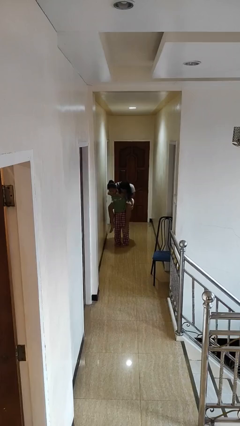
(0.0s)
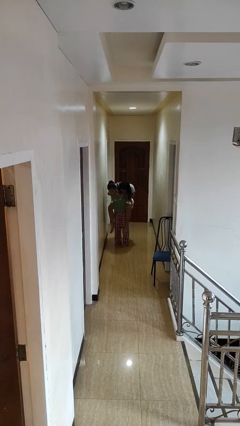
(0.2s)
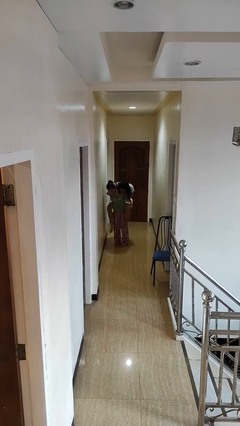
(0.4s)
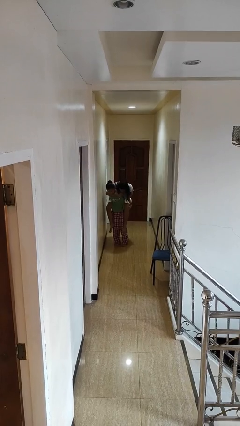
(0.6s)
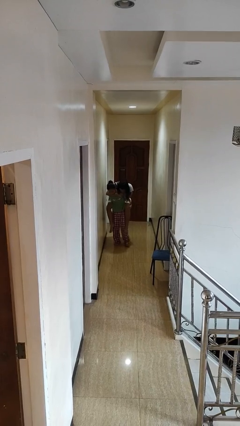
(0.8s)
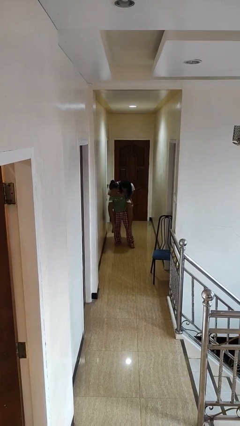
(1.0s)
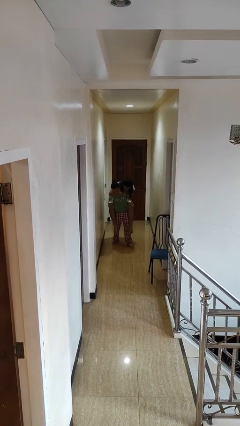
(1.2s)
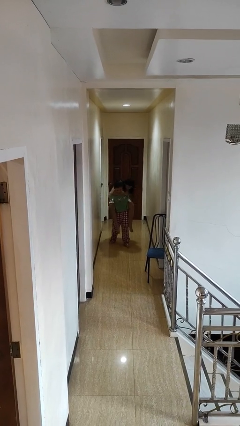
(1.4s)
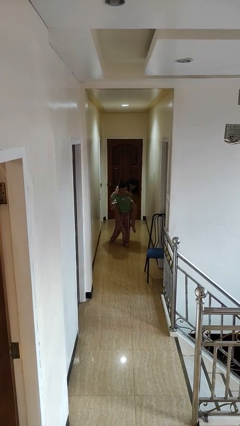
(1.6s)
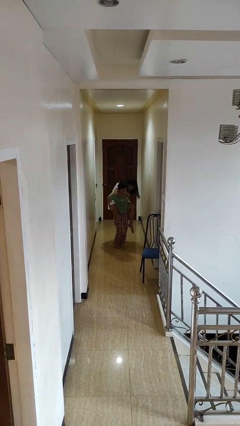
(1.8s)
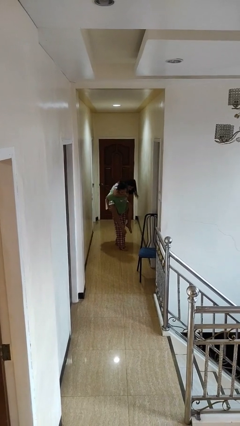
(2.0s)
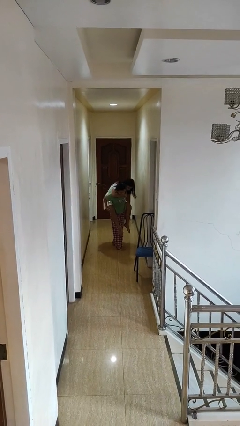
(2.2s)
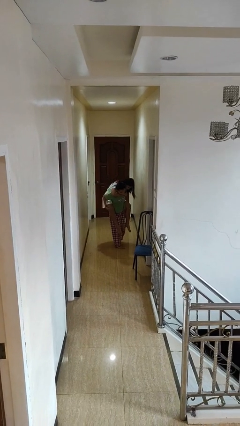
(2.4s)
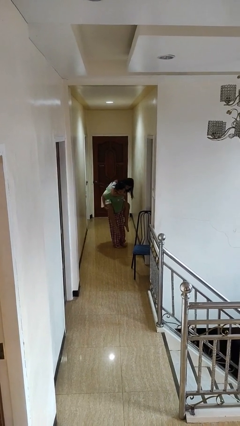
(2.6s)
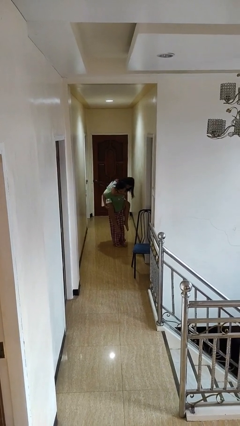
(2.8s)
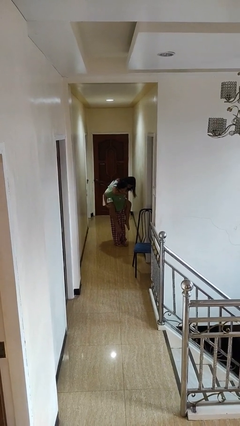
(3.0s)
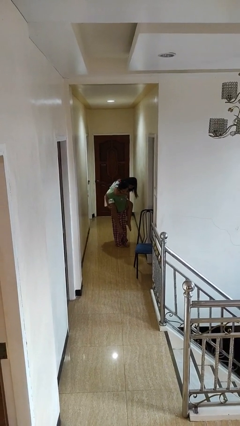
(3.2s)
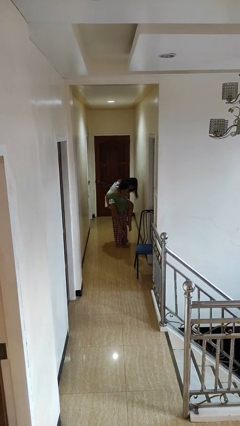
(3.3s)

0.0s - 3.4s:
person carries person on back

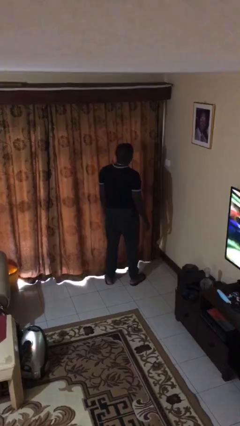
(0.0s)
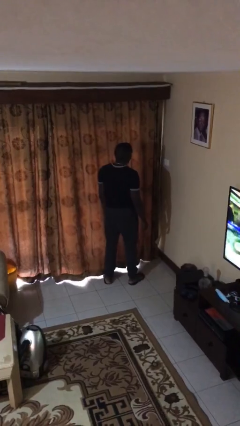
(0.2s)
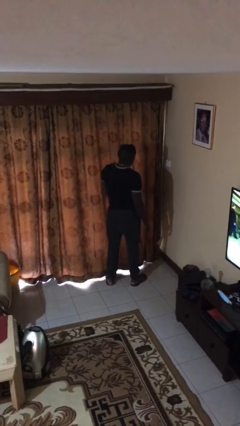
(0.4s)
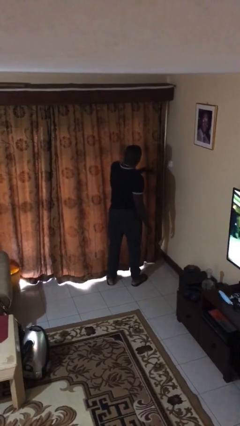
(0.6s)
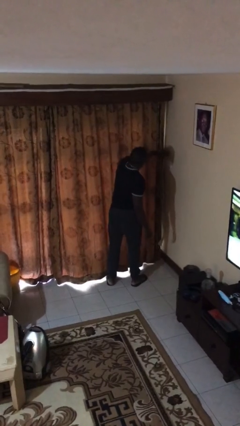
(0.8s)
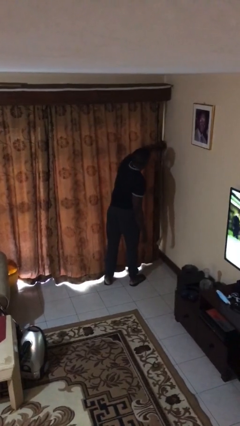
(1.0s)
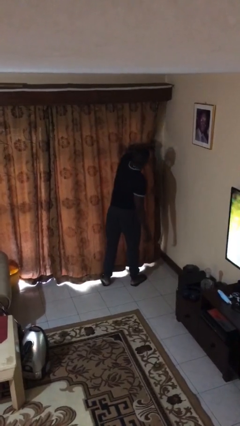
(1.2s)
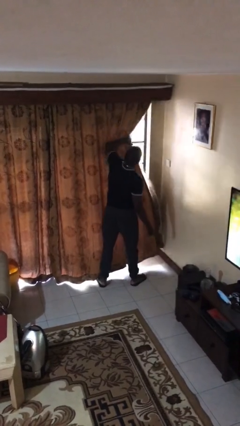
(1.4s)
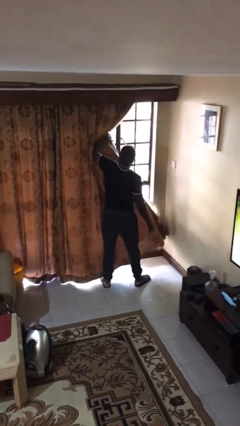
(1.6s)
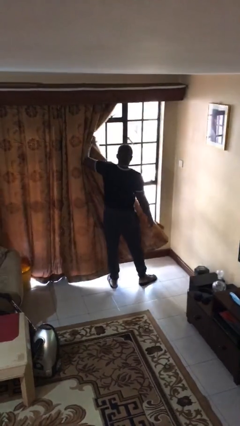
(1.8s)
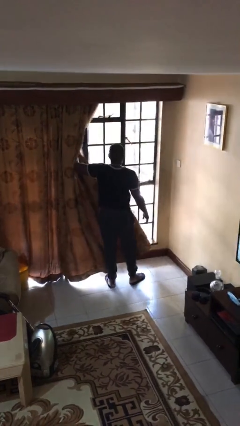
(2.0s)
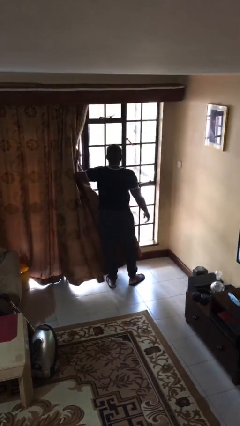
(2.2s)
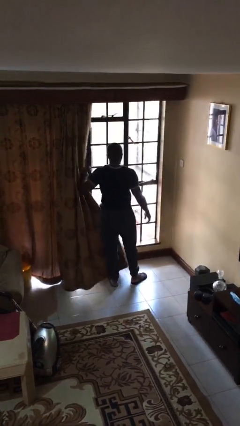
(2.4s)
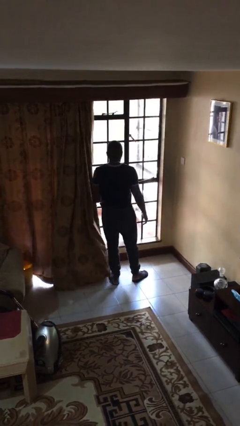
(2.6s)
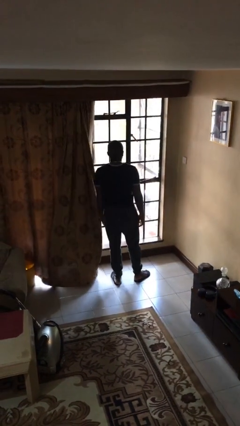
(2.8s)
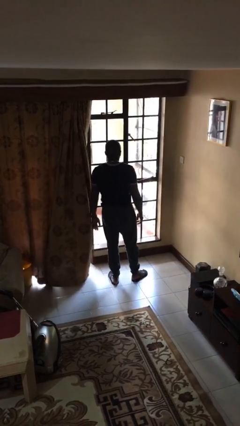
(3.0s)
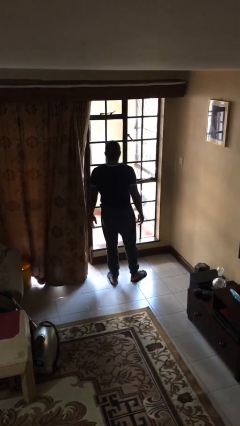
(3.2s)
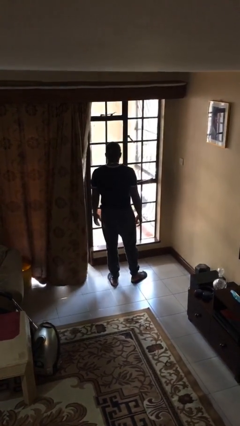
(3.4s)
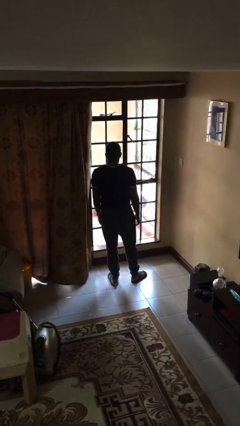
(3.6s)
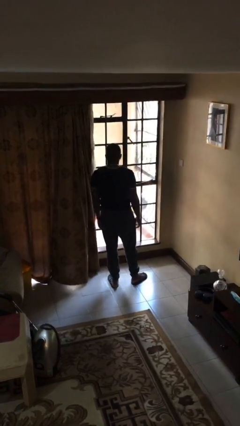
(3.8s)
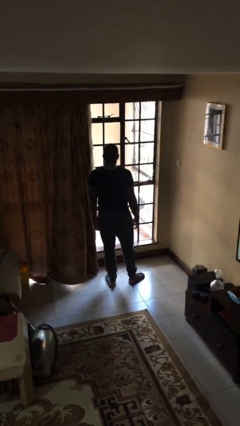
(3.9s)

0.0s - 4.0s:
person opens curtains

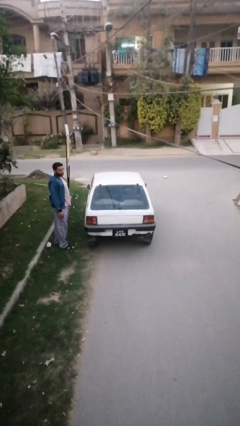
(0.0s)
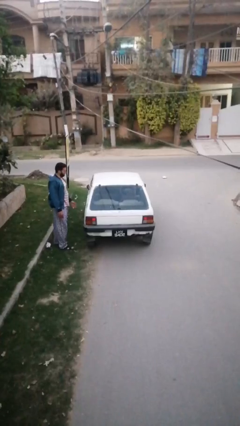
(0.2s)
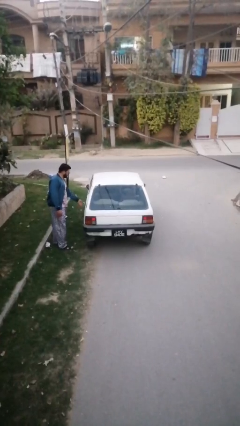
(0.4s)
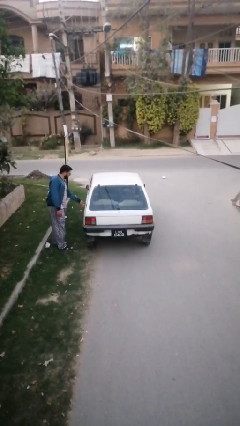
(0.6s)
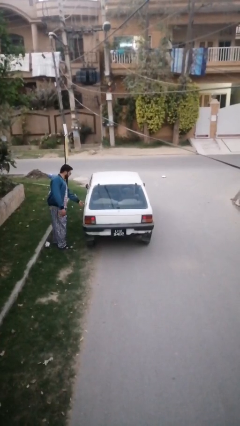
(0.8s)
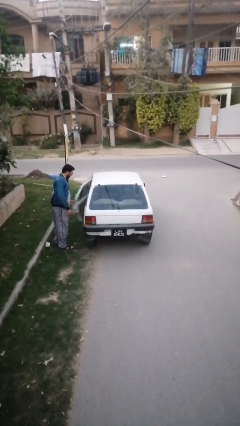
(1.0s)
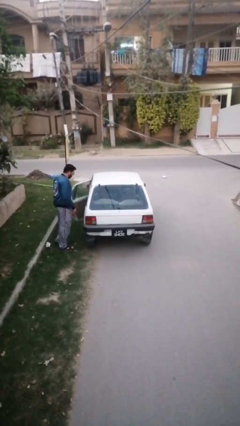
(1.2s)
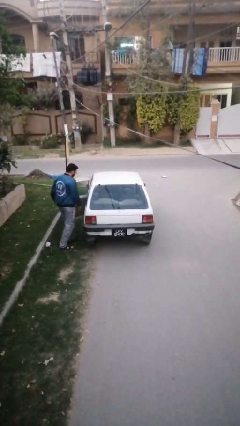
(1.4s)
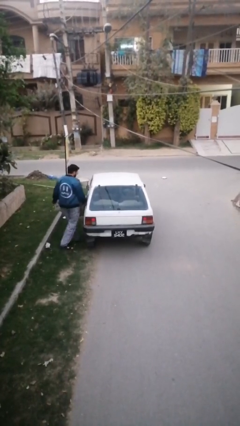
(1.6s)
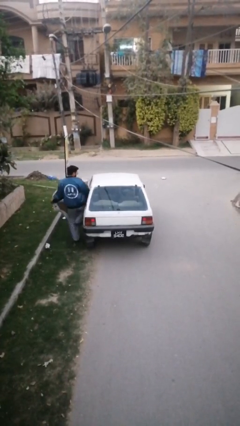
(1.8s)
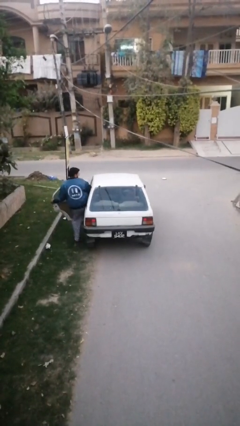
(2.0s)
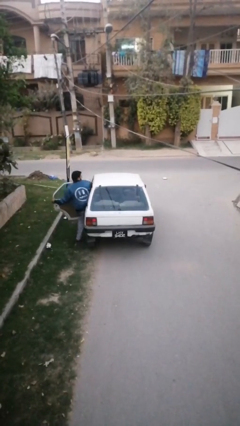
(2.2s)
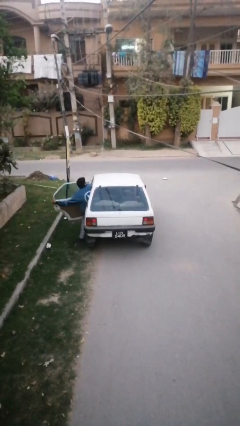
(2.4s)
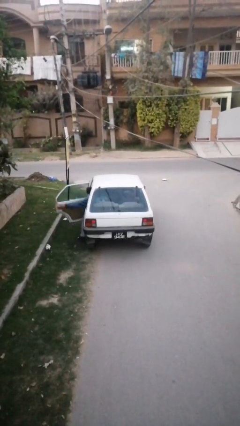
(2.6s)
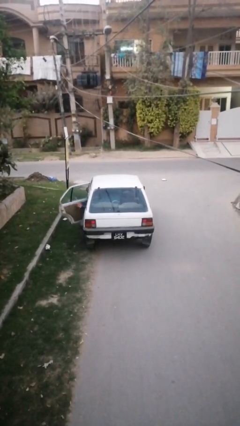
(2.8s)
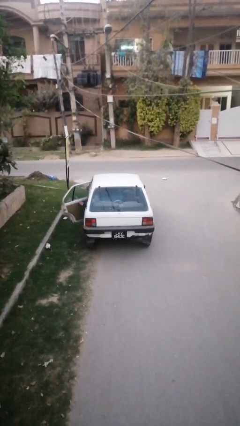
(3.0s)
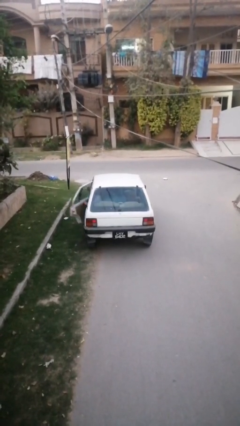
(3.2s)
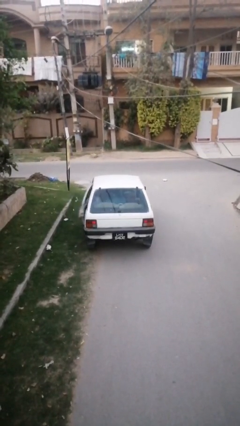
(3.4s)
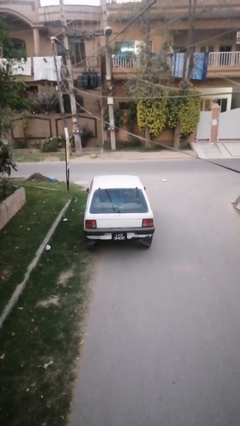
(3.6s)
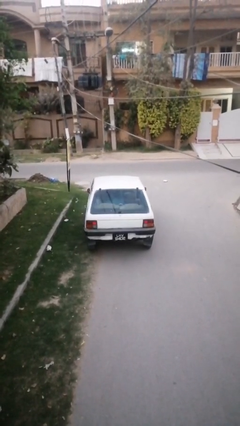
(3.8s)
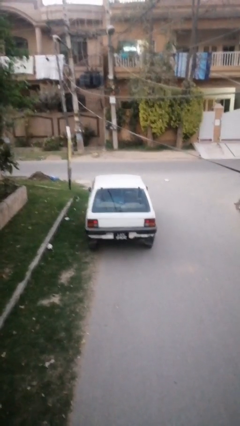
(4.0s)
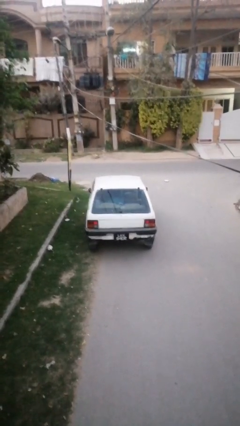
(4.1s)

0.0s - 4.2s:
car picks up person

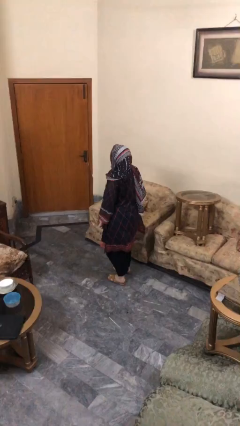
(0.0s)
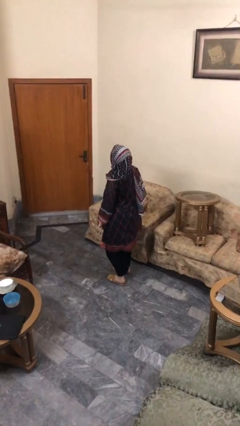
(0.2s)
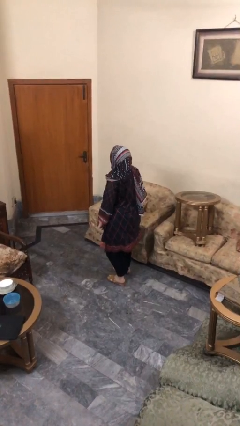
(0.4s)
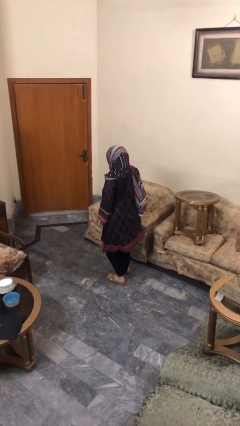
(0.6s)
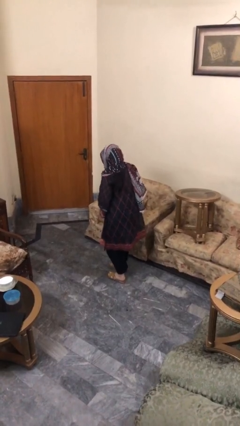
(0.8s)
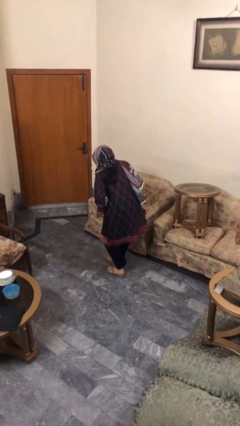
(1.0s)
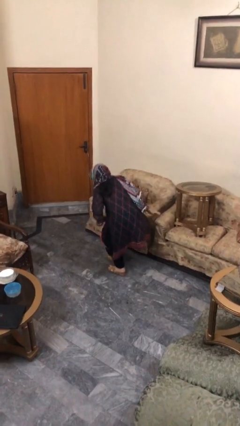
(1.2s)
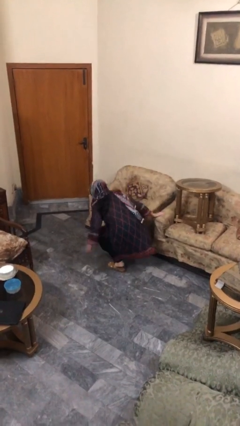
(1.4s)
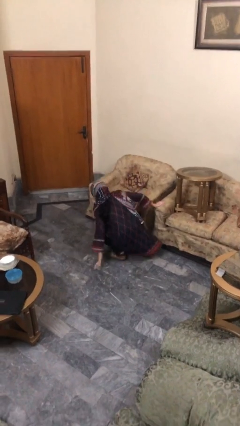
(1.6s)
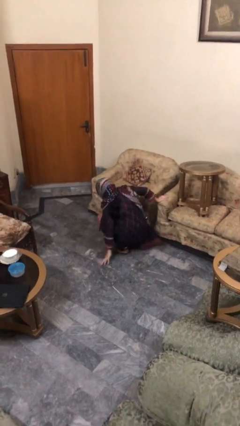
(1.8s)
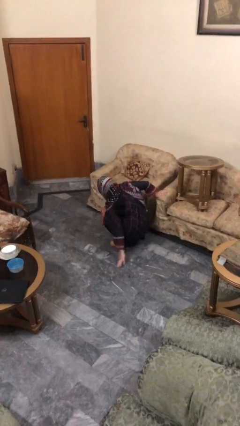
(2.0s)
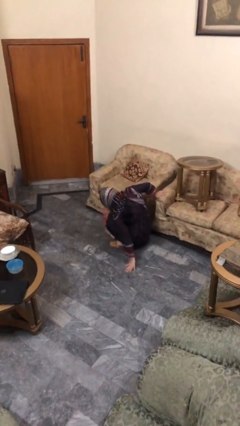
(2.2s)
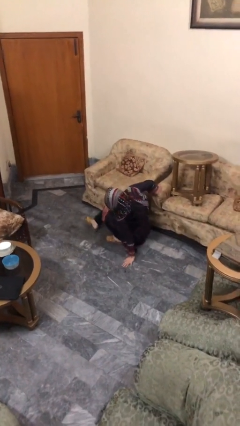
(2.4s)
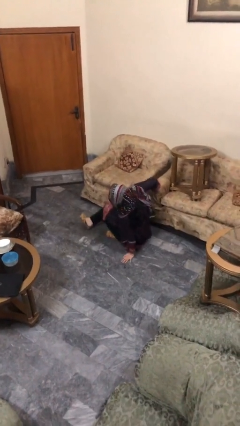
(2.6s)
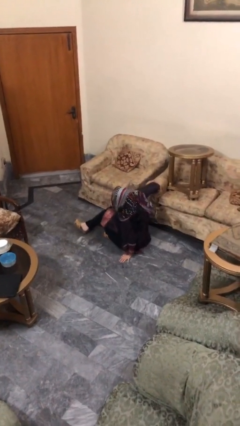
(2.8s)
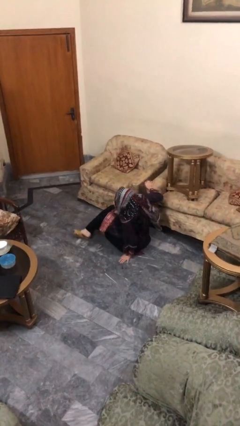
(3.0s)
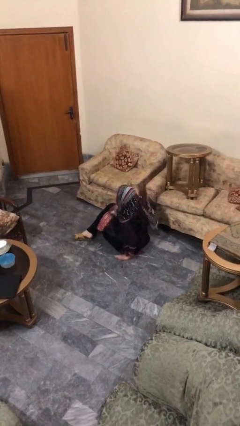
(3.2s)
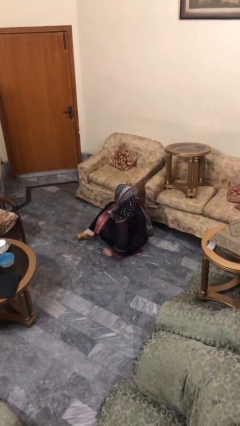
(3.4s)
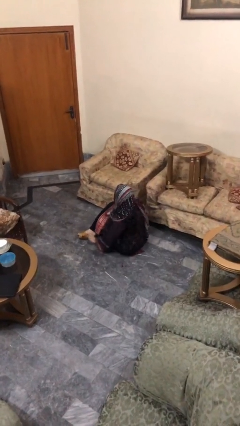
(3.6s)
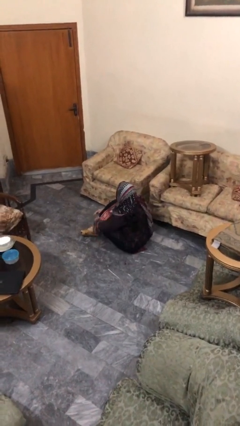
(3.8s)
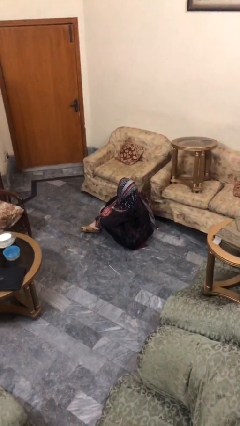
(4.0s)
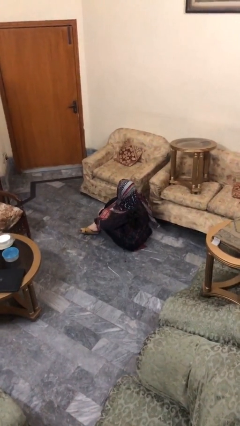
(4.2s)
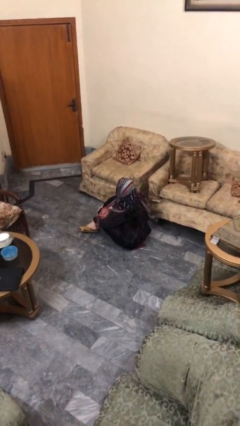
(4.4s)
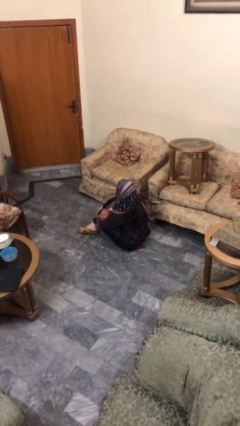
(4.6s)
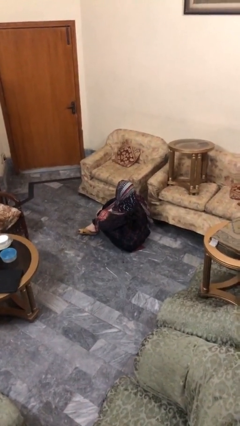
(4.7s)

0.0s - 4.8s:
person sits crisscross

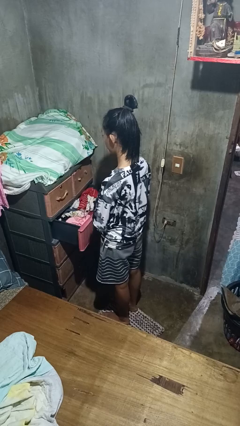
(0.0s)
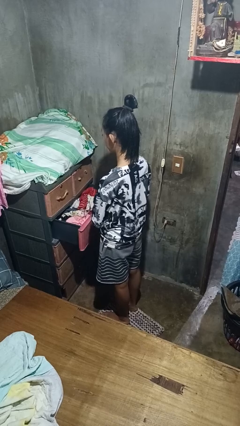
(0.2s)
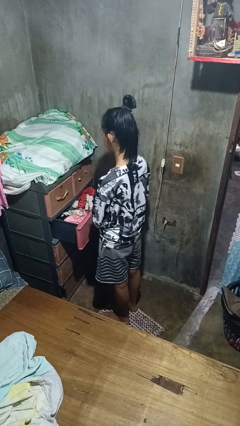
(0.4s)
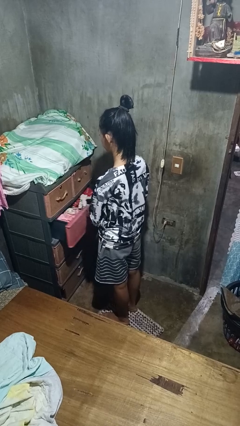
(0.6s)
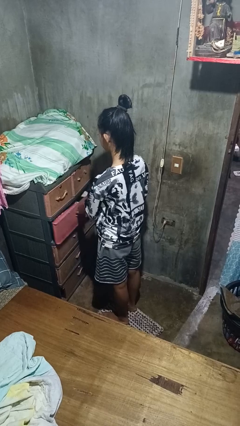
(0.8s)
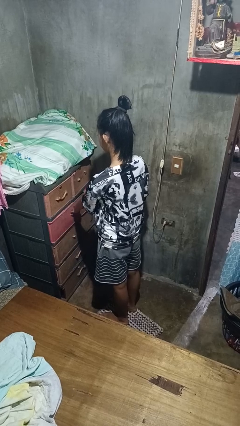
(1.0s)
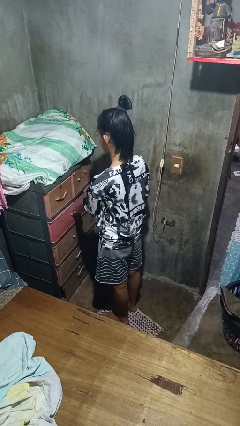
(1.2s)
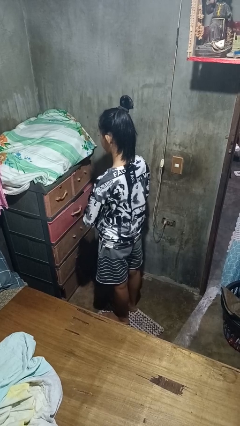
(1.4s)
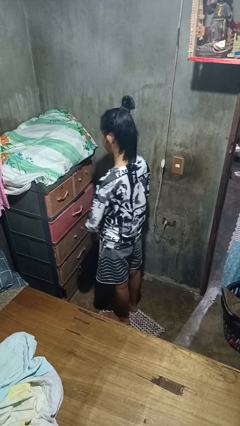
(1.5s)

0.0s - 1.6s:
person closes dresser drawer
